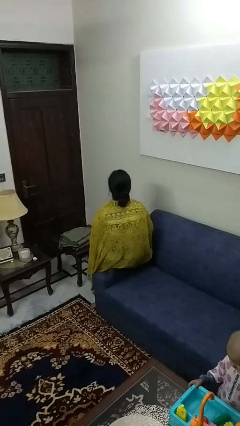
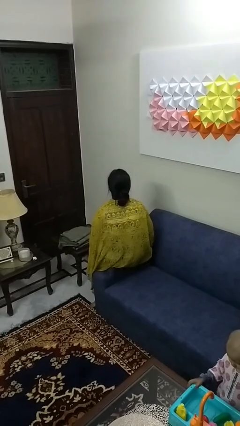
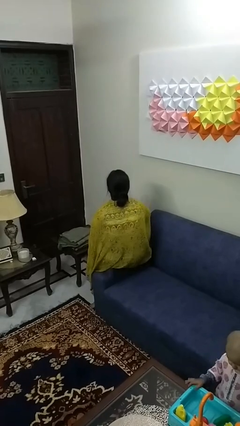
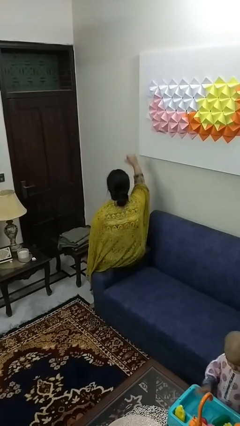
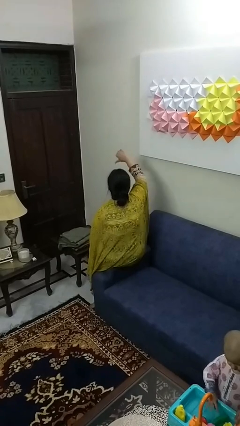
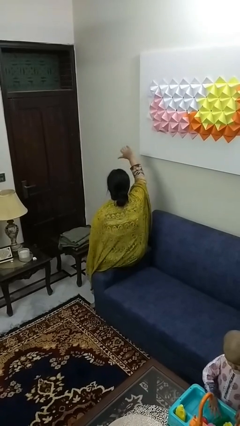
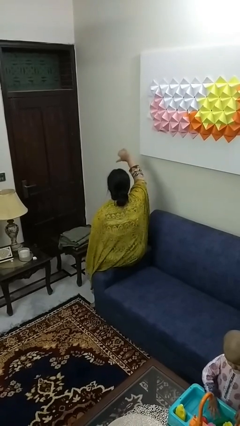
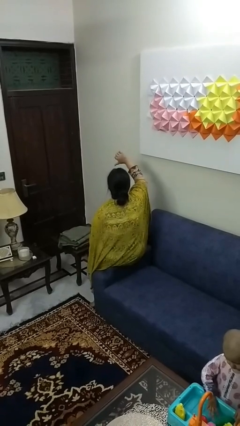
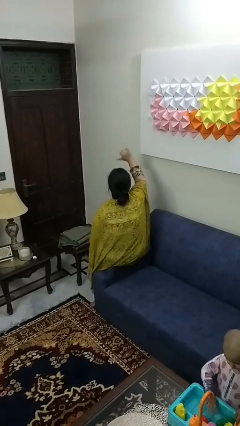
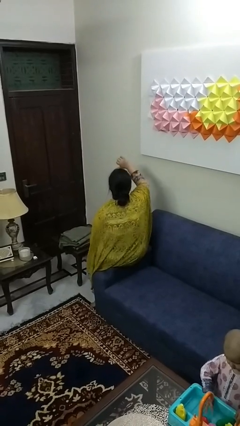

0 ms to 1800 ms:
person gestures thumbs down

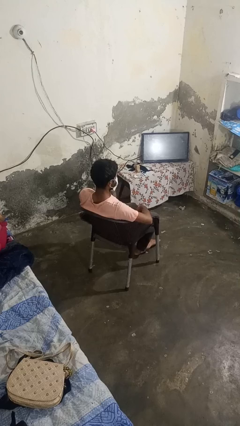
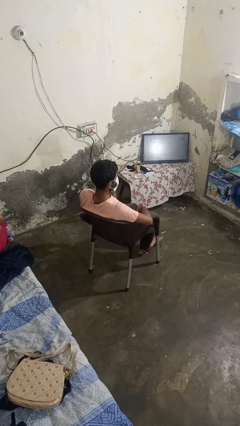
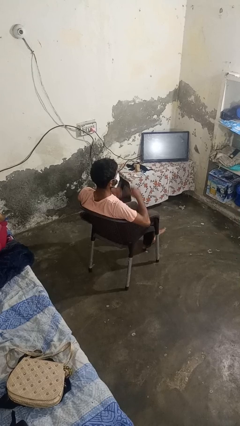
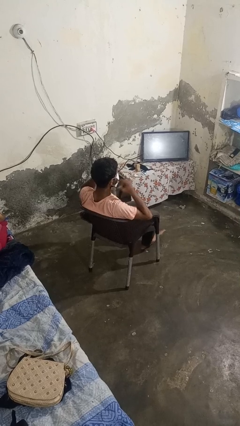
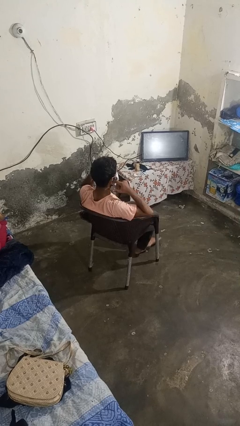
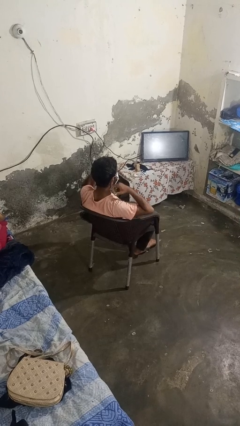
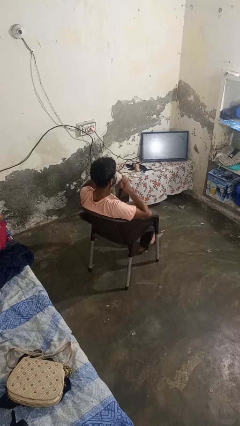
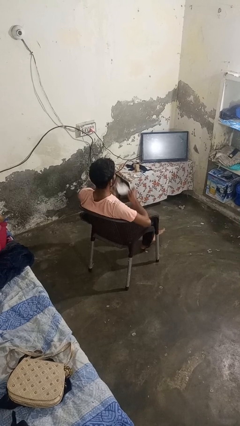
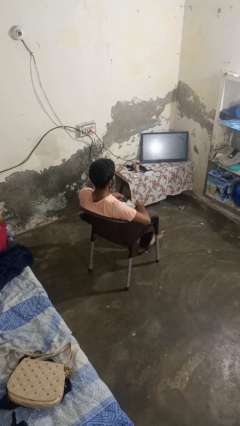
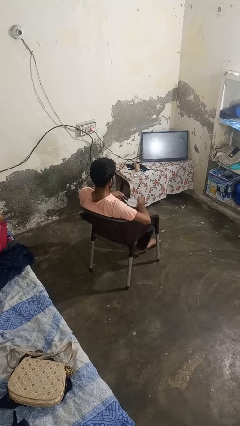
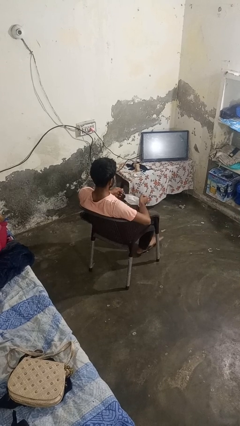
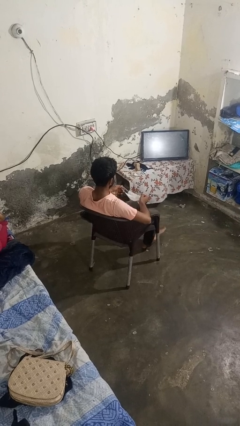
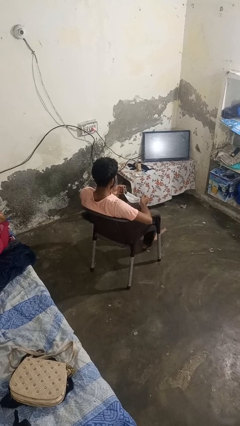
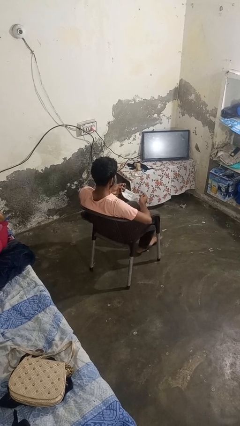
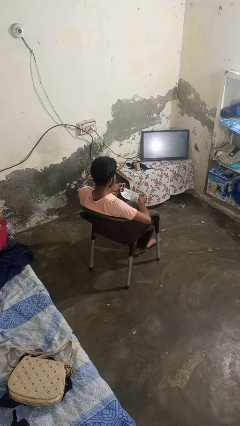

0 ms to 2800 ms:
person takes off facemask

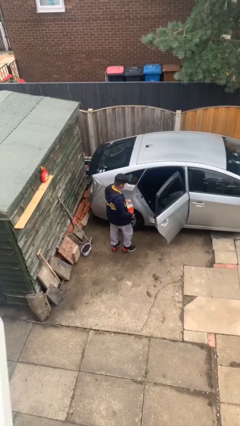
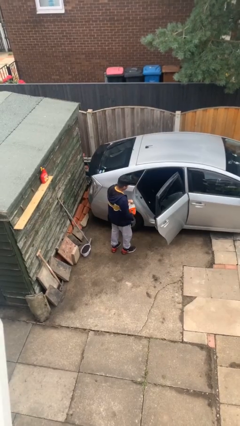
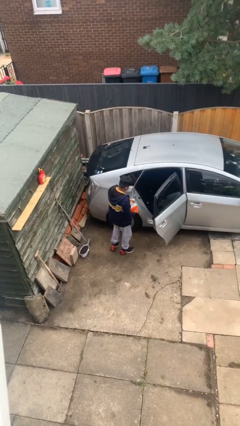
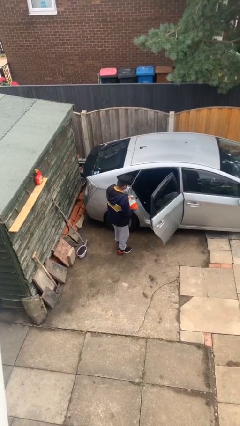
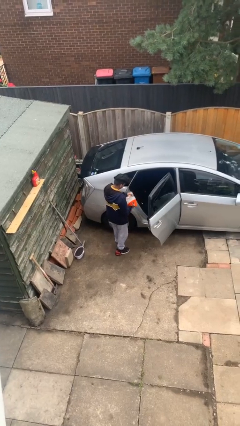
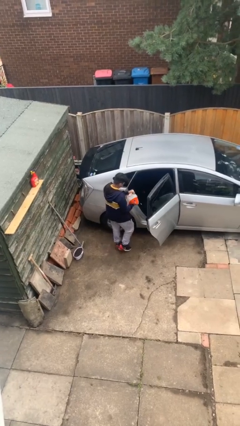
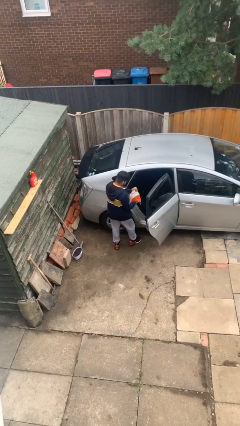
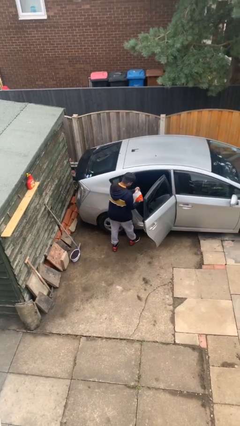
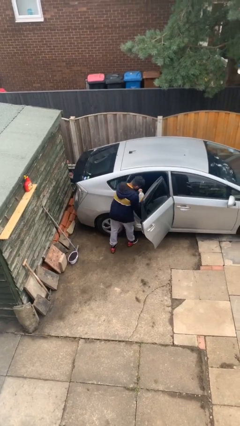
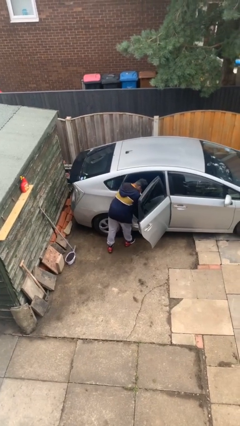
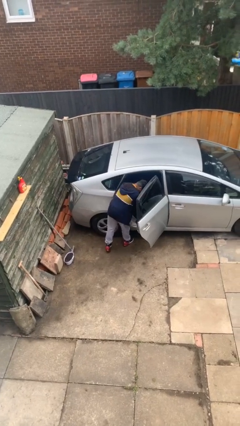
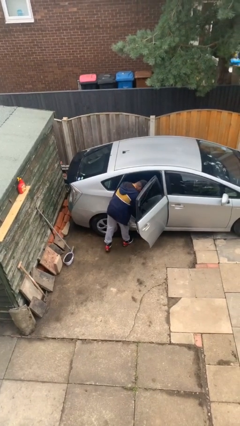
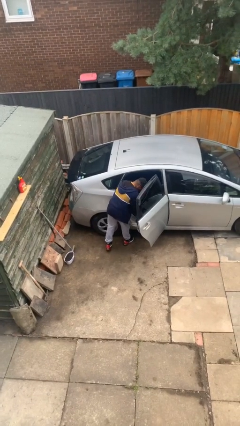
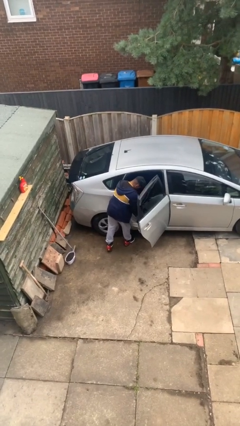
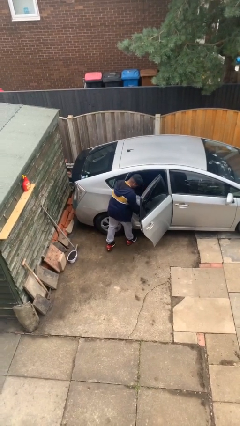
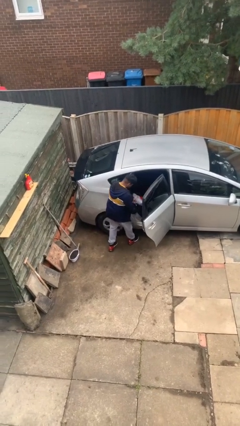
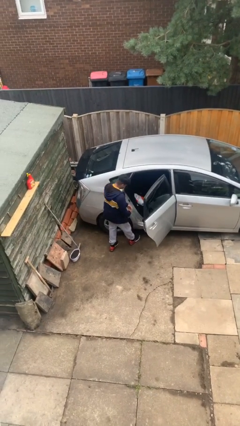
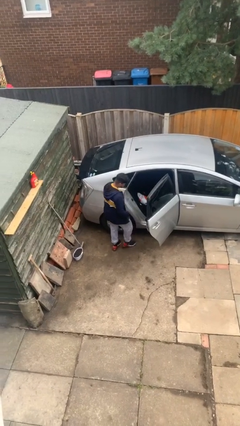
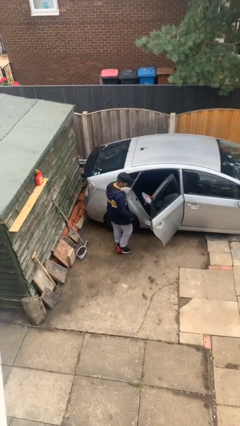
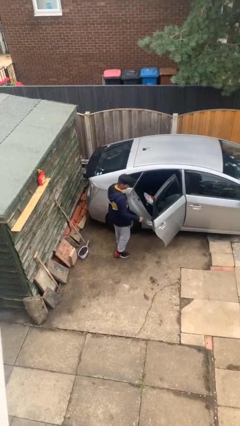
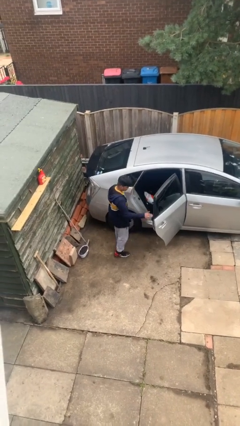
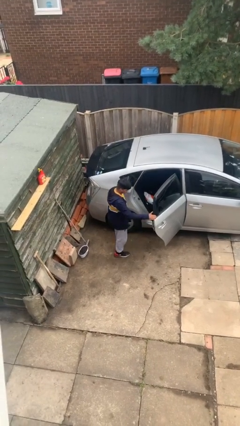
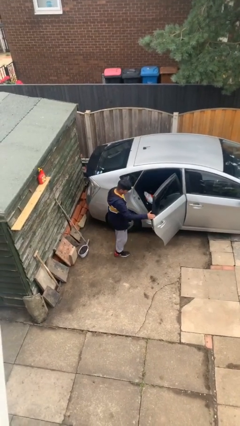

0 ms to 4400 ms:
person loads car

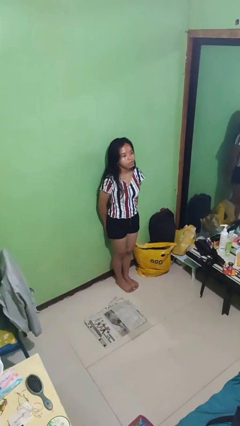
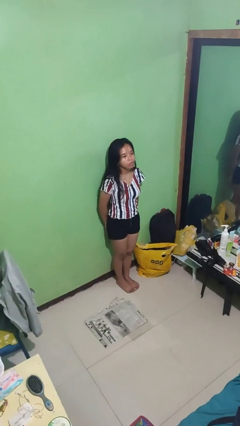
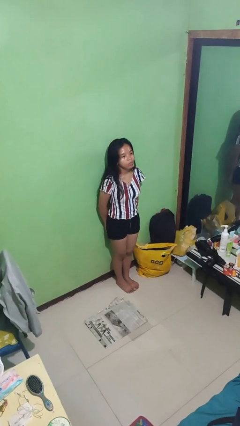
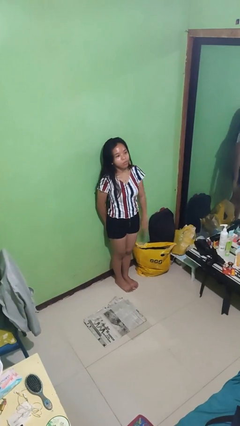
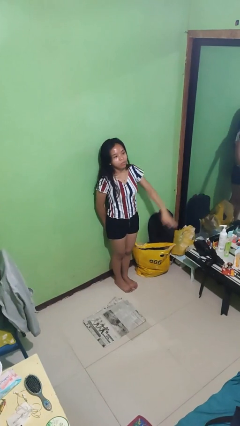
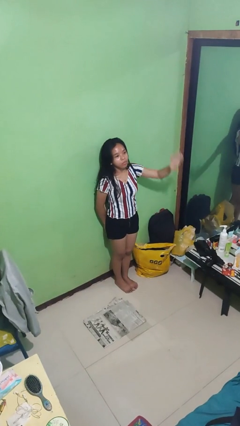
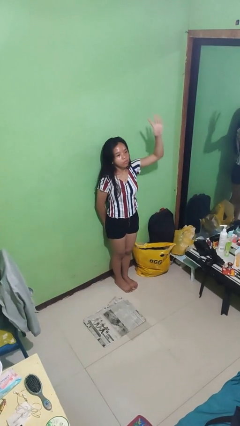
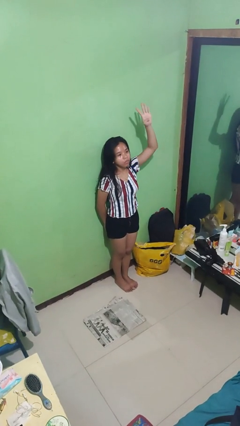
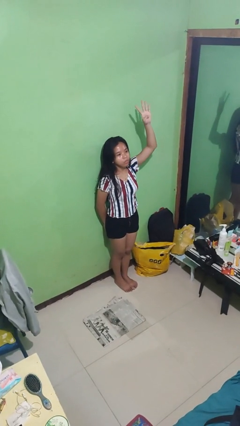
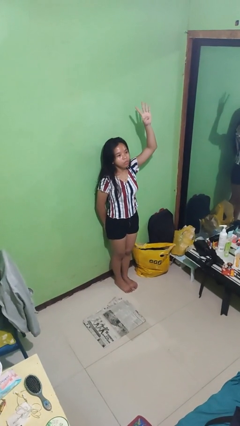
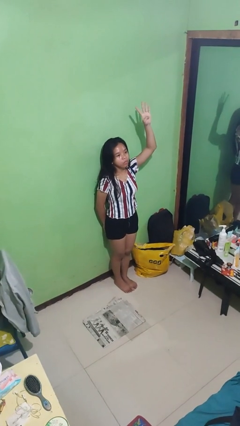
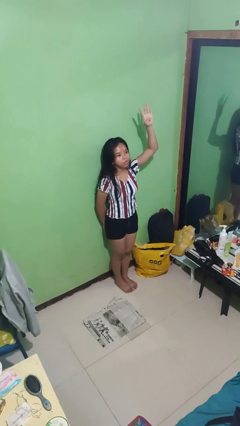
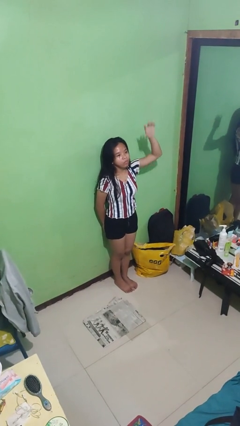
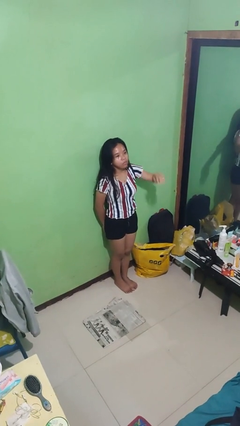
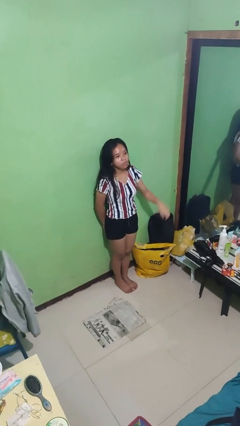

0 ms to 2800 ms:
person gestures number four

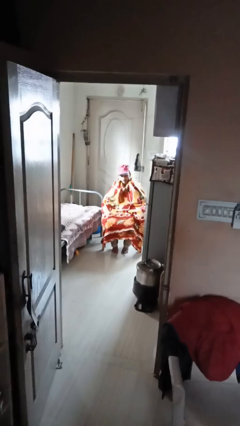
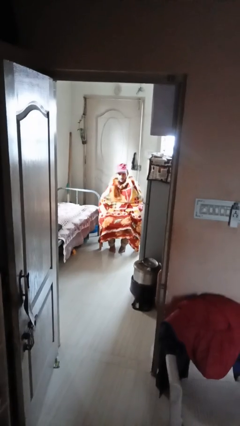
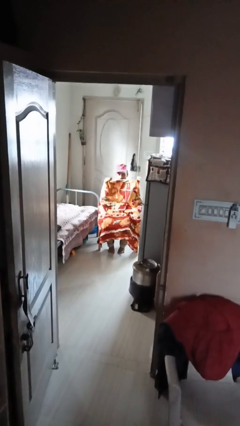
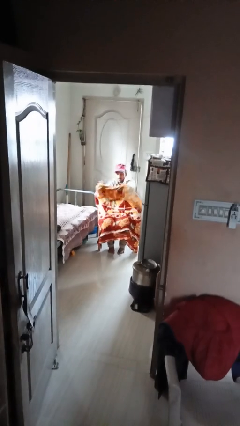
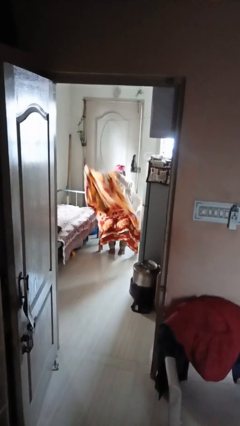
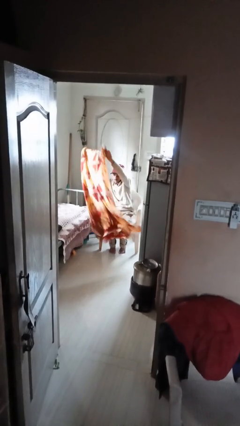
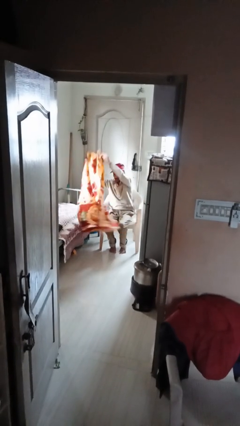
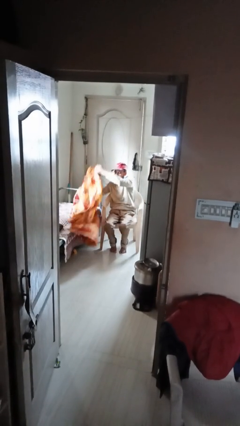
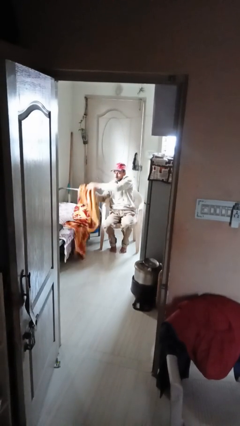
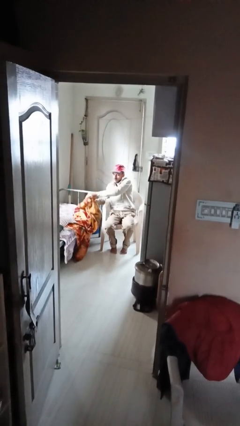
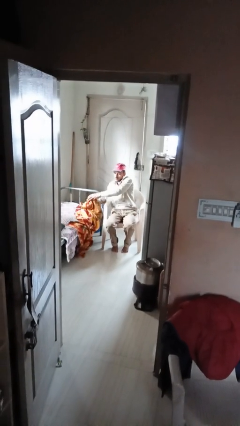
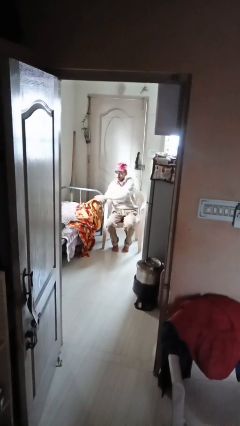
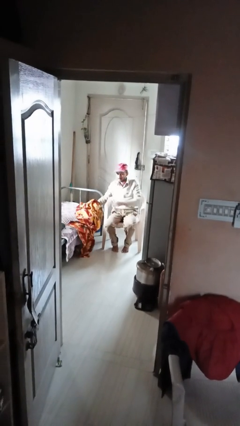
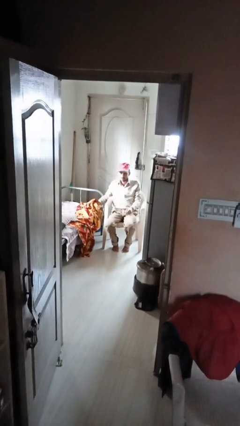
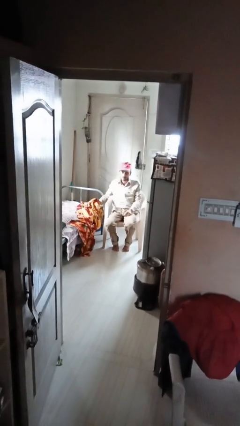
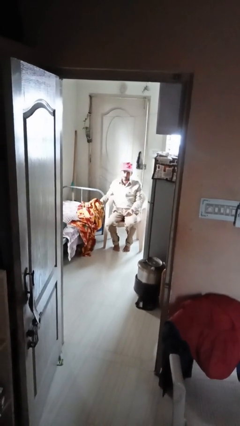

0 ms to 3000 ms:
person uncovers with blanket

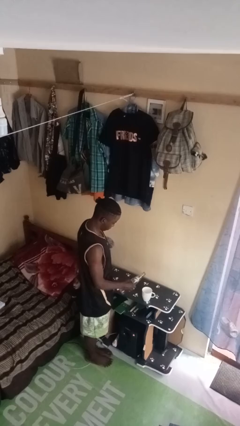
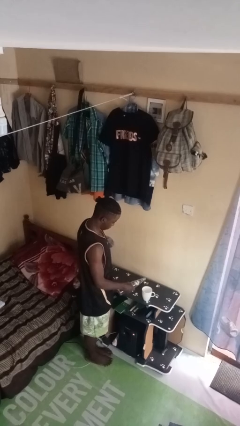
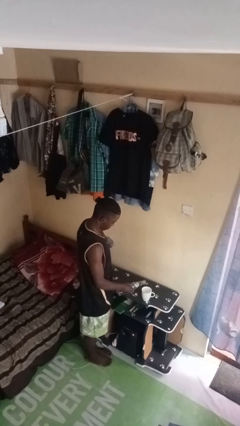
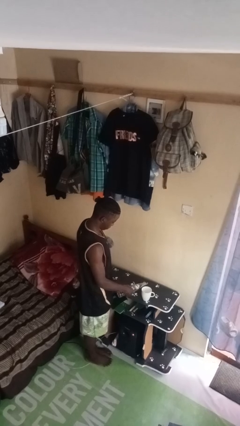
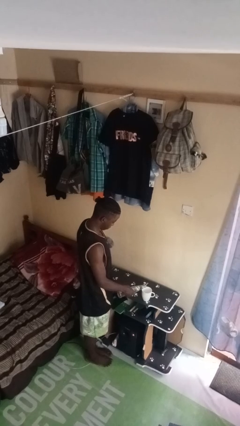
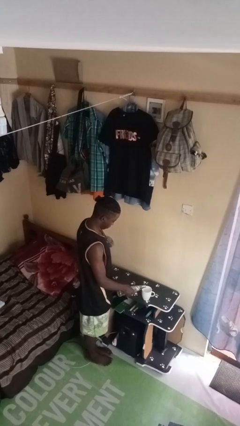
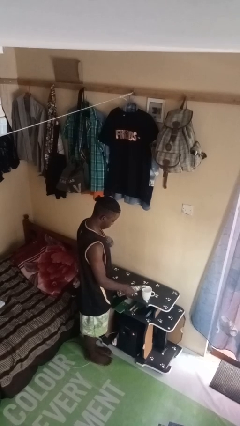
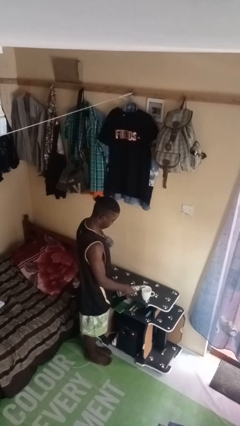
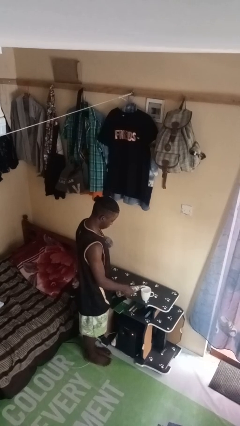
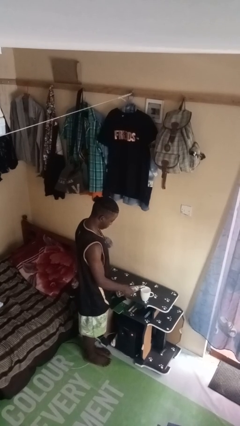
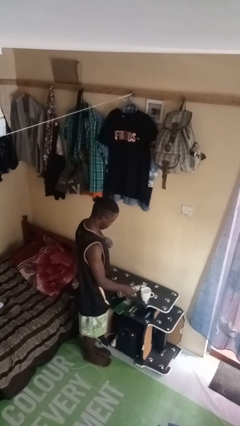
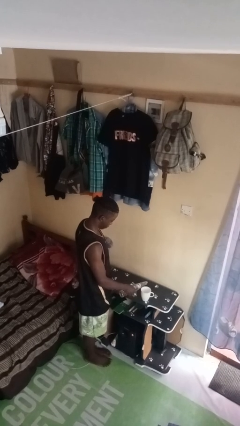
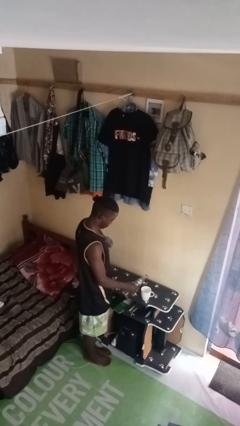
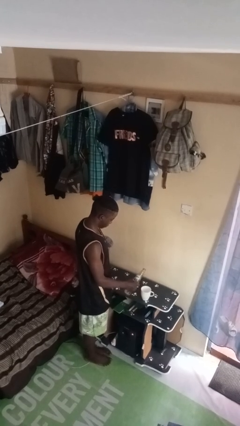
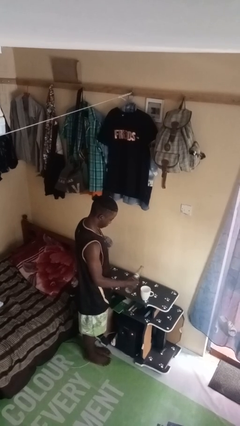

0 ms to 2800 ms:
person pours liquid into cup
